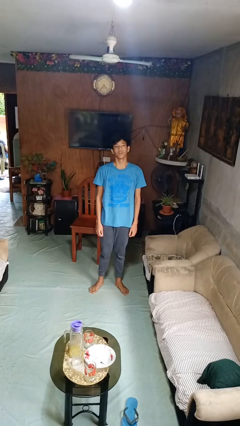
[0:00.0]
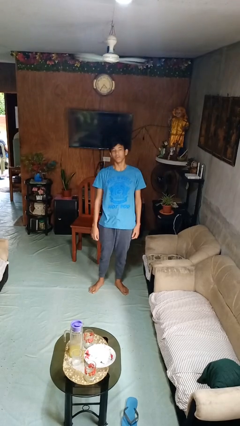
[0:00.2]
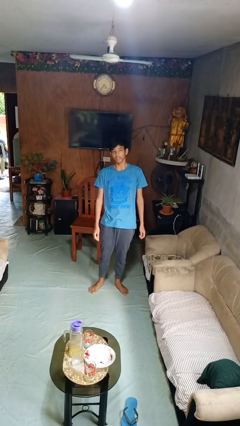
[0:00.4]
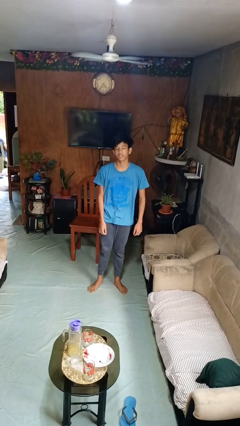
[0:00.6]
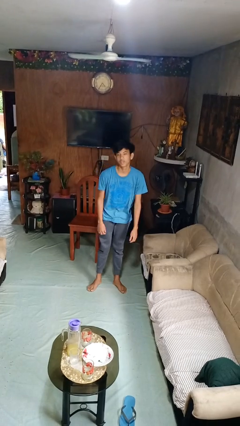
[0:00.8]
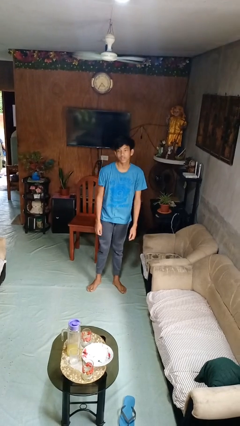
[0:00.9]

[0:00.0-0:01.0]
person dances in place

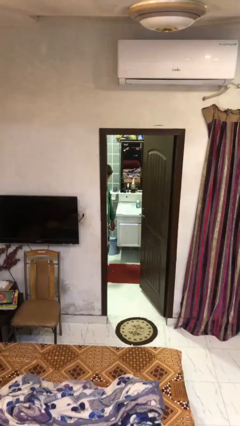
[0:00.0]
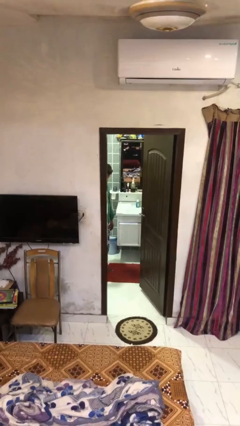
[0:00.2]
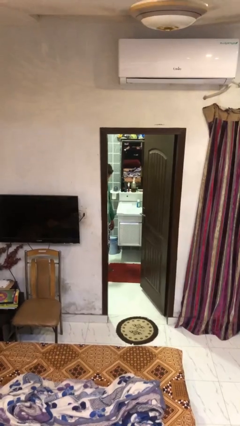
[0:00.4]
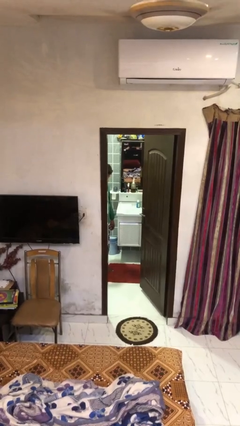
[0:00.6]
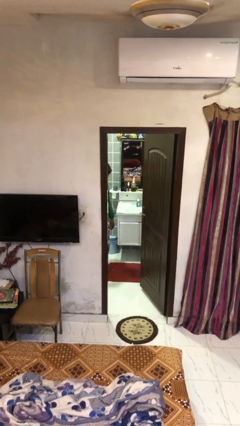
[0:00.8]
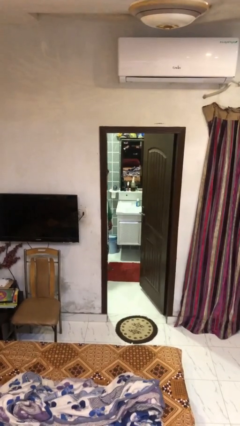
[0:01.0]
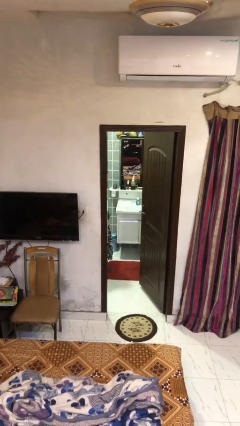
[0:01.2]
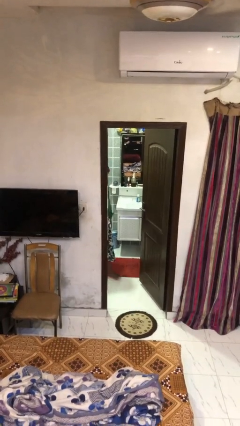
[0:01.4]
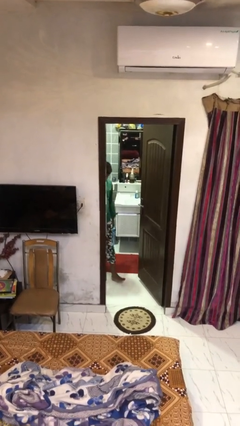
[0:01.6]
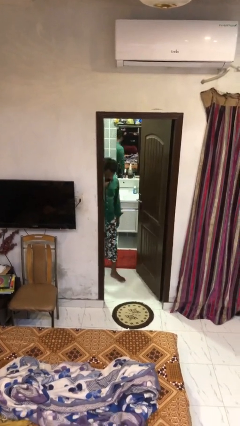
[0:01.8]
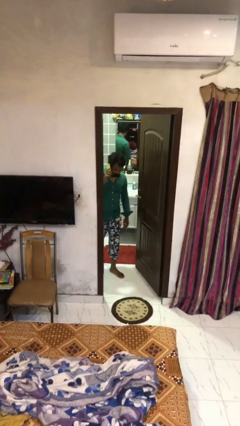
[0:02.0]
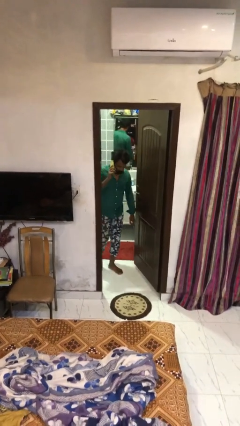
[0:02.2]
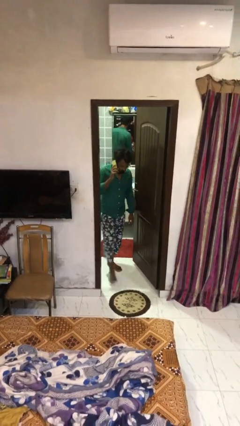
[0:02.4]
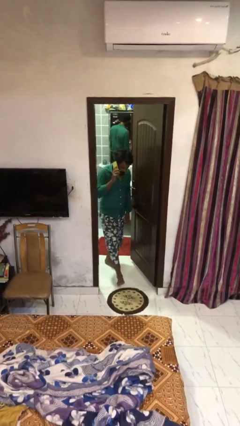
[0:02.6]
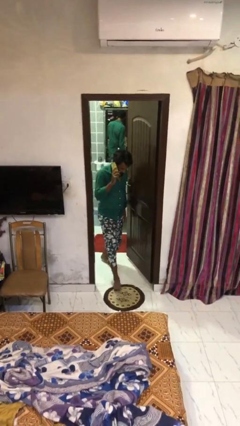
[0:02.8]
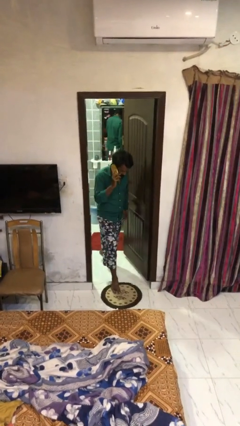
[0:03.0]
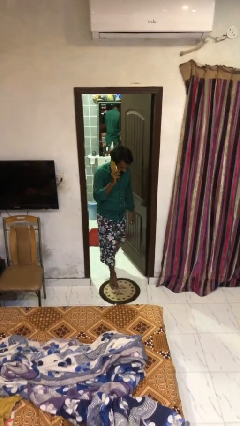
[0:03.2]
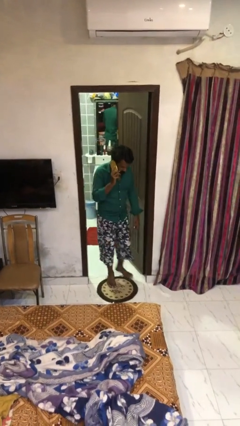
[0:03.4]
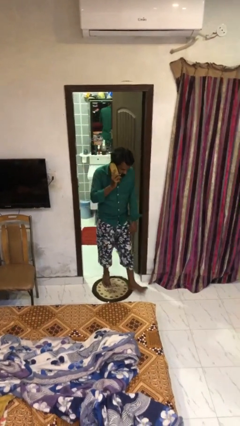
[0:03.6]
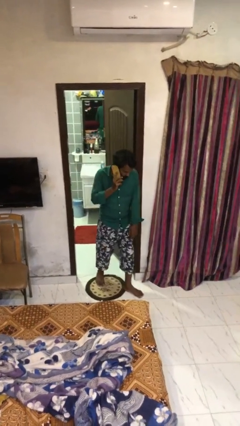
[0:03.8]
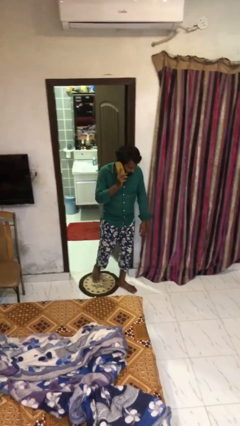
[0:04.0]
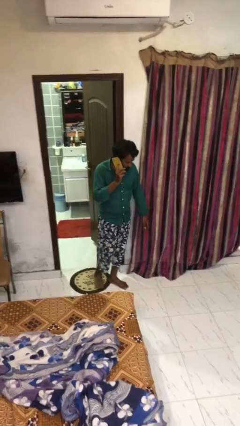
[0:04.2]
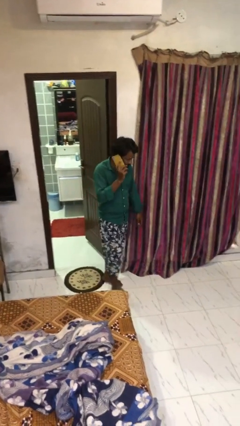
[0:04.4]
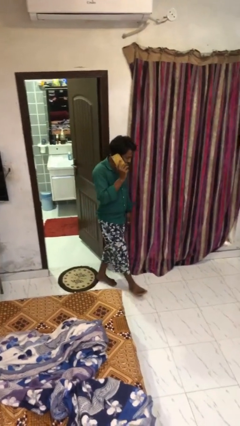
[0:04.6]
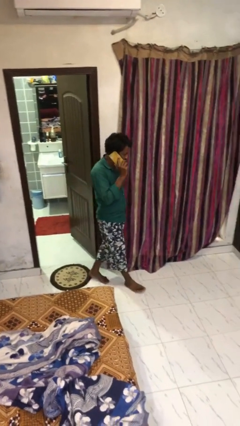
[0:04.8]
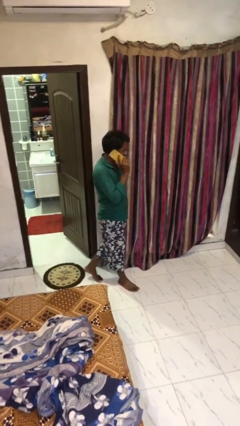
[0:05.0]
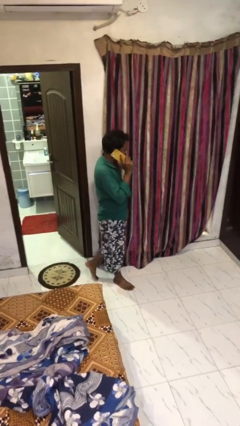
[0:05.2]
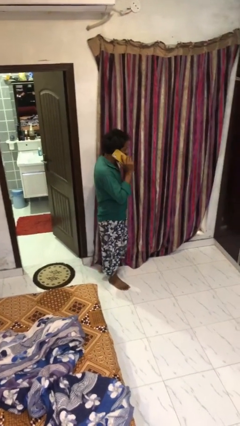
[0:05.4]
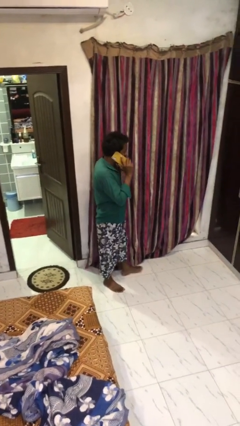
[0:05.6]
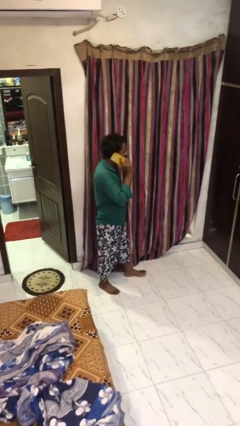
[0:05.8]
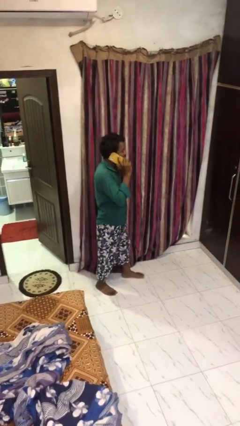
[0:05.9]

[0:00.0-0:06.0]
person enters scene through structure

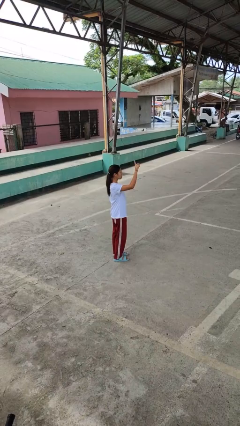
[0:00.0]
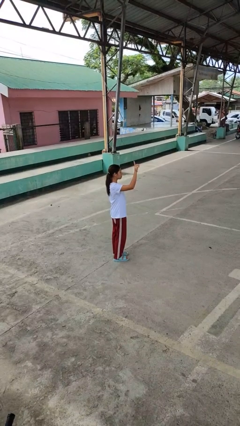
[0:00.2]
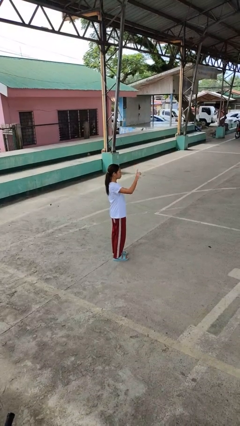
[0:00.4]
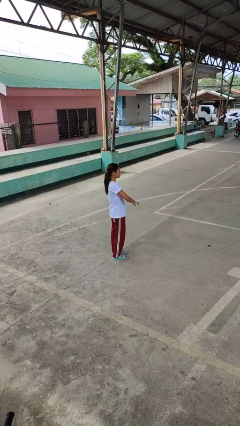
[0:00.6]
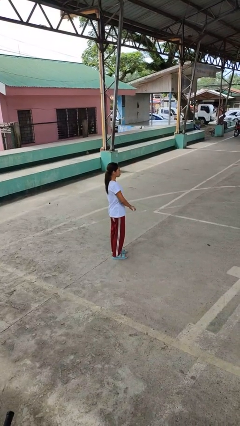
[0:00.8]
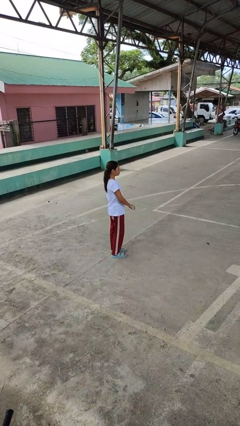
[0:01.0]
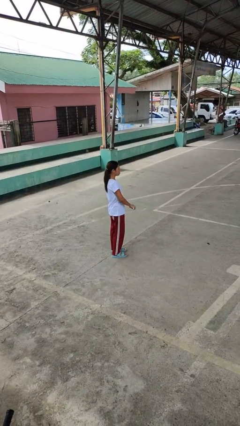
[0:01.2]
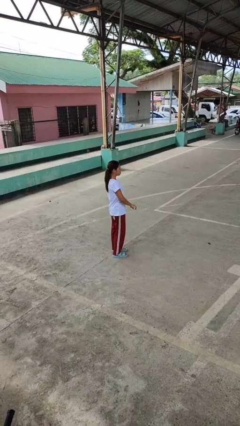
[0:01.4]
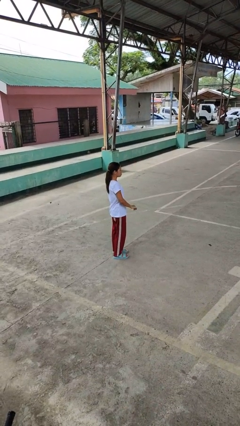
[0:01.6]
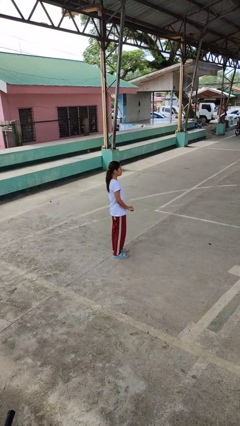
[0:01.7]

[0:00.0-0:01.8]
person gestures swipe down

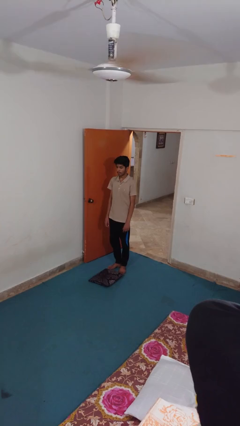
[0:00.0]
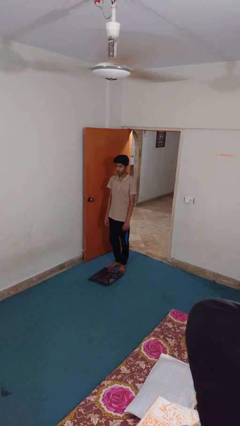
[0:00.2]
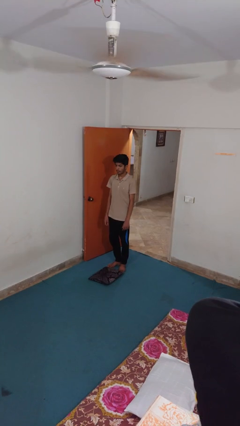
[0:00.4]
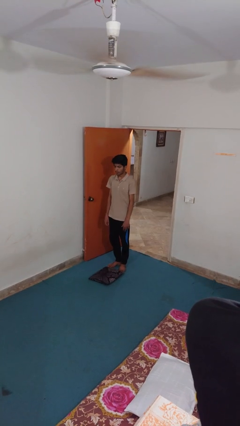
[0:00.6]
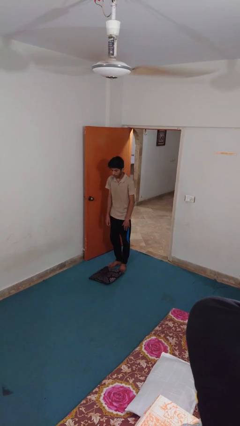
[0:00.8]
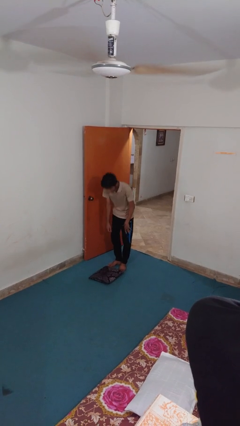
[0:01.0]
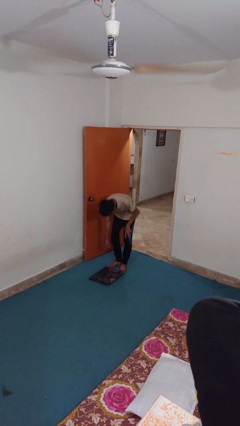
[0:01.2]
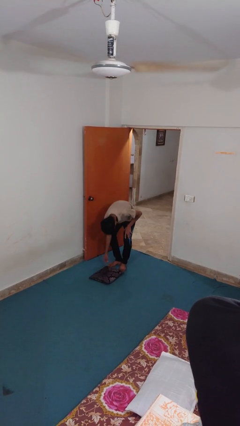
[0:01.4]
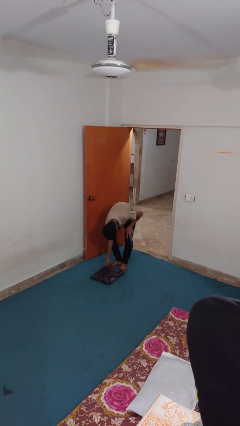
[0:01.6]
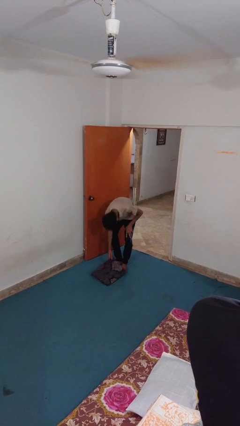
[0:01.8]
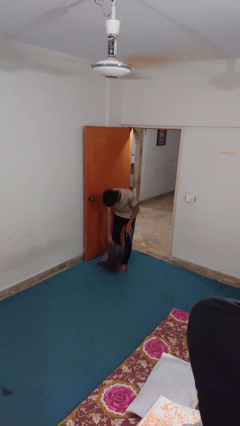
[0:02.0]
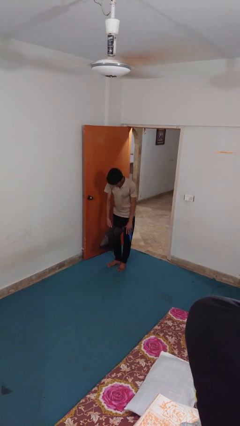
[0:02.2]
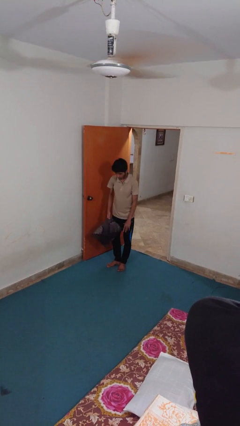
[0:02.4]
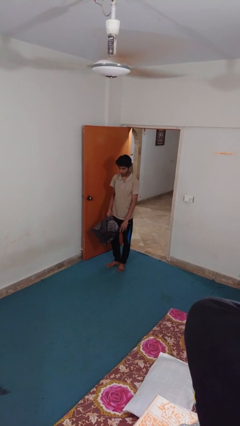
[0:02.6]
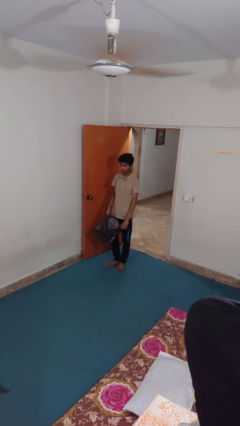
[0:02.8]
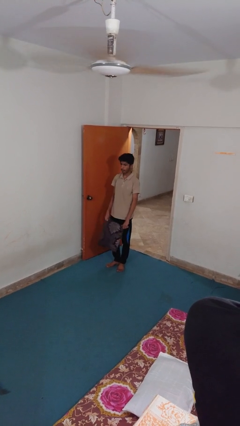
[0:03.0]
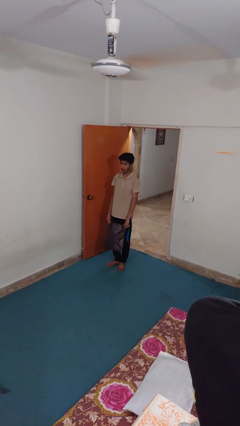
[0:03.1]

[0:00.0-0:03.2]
person picks up object from floor

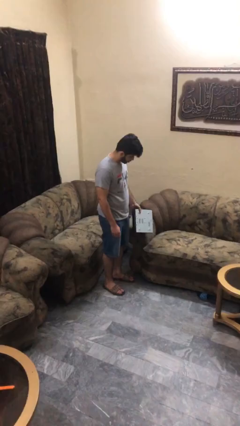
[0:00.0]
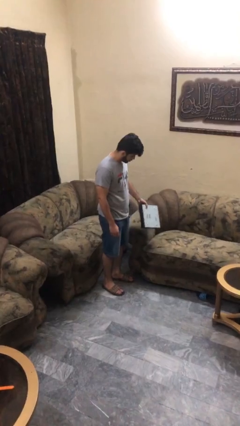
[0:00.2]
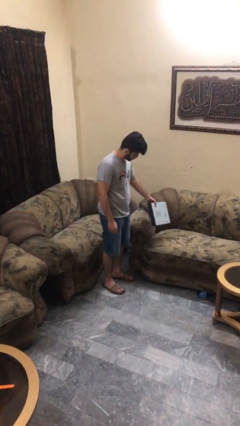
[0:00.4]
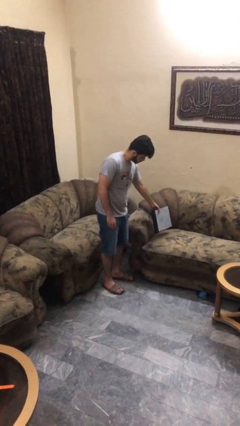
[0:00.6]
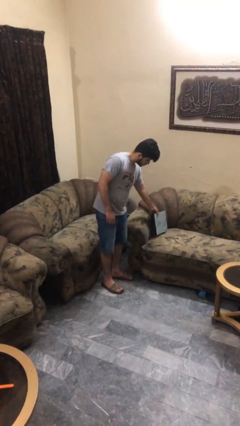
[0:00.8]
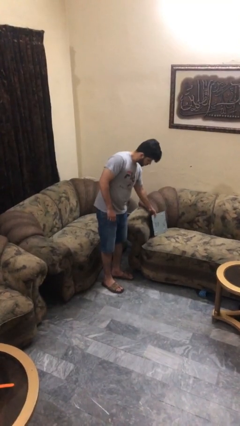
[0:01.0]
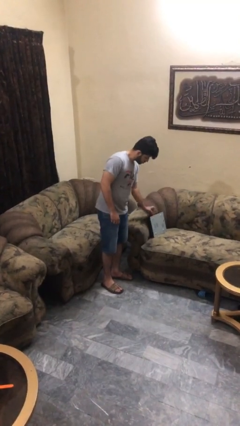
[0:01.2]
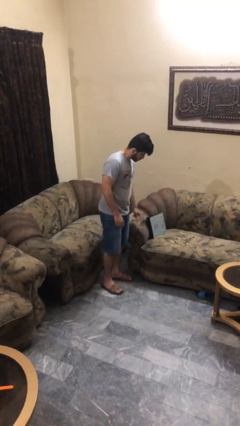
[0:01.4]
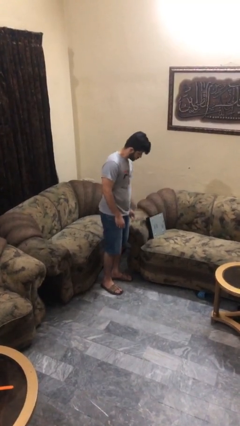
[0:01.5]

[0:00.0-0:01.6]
person puts down object on couch

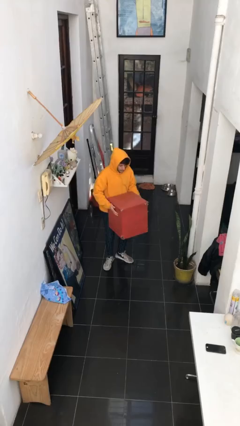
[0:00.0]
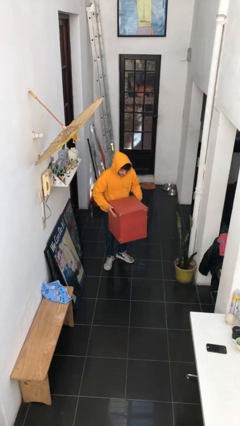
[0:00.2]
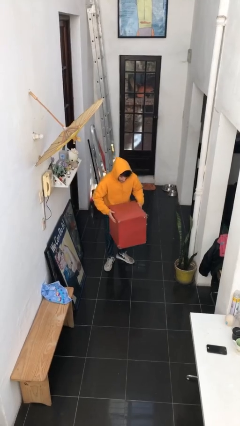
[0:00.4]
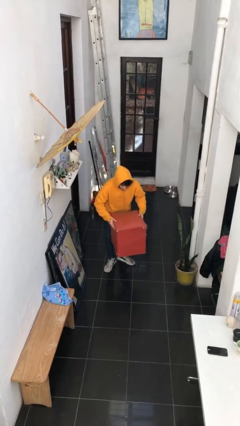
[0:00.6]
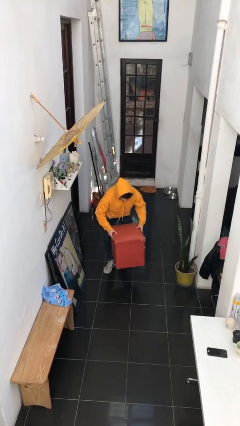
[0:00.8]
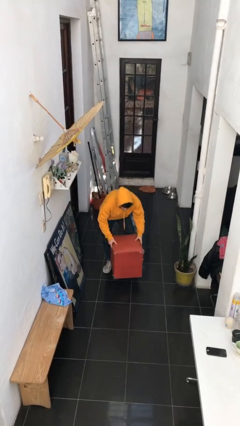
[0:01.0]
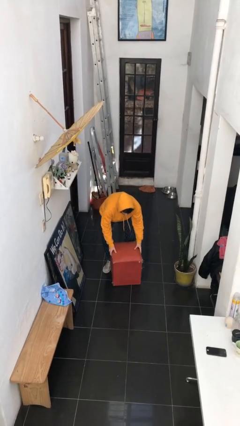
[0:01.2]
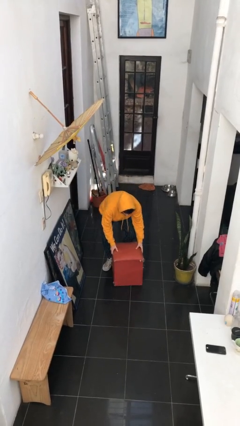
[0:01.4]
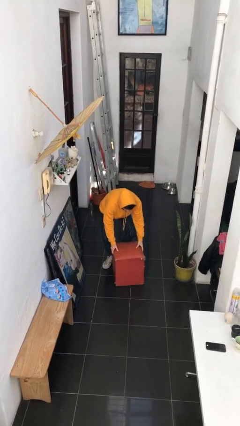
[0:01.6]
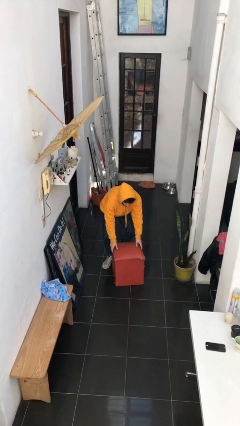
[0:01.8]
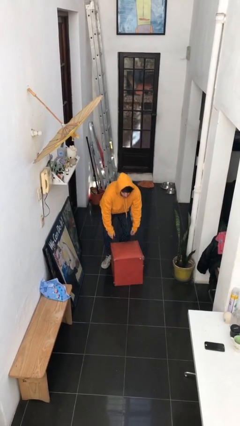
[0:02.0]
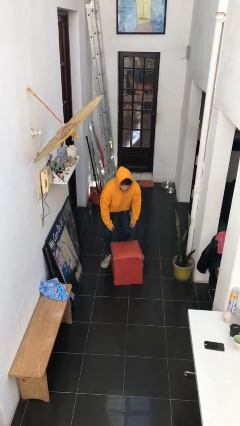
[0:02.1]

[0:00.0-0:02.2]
person puts down object on floor

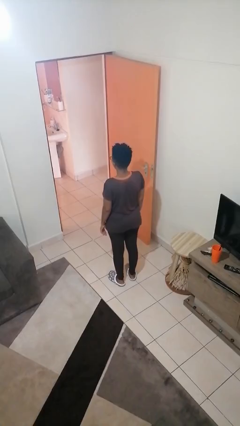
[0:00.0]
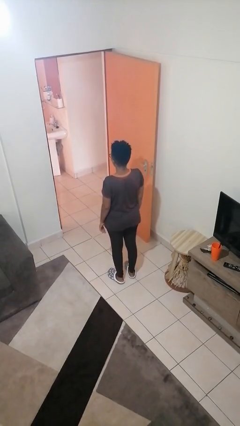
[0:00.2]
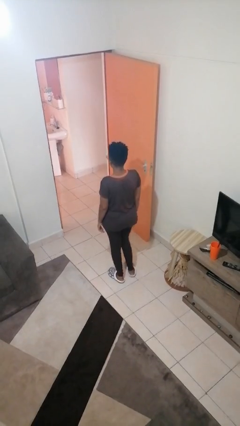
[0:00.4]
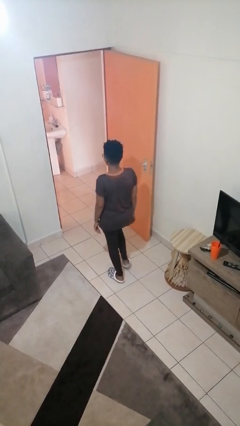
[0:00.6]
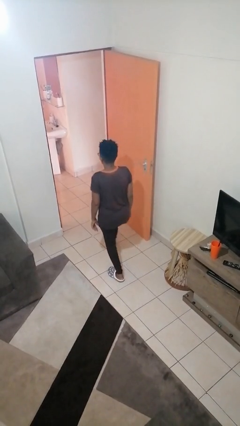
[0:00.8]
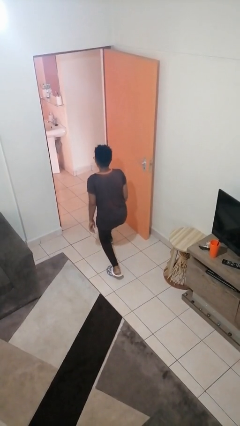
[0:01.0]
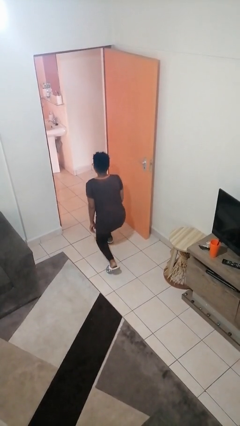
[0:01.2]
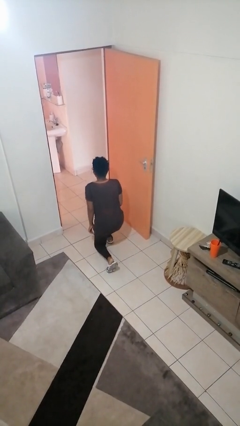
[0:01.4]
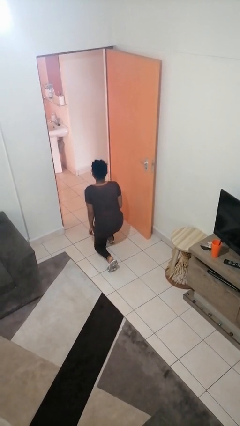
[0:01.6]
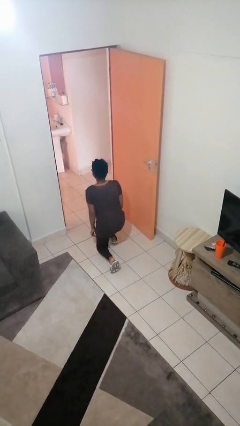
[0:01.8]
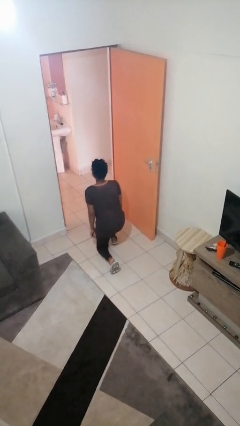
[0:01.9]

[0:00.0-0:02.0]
person kneels
